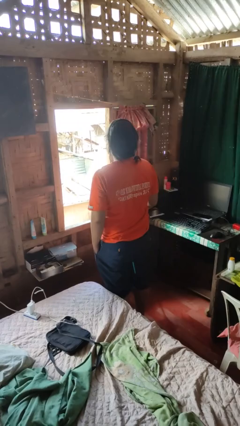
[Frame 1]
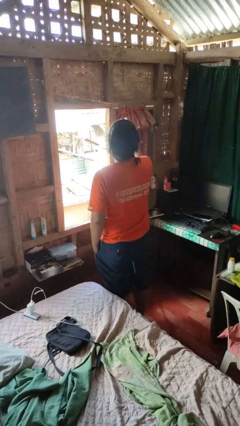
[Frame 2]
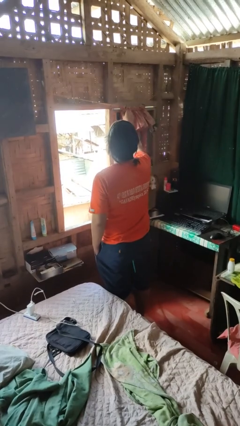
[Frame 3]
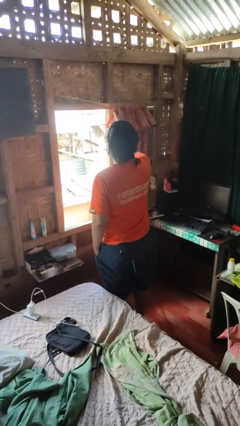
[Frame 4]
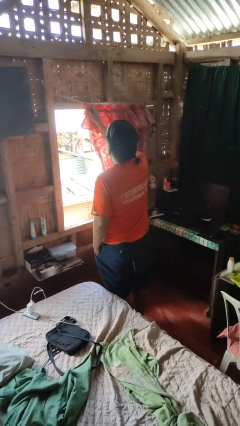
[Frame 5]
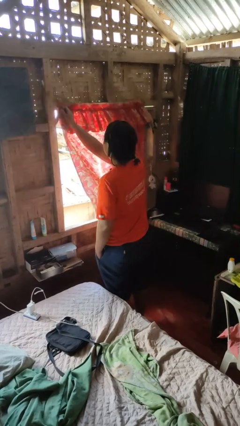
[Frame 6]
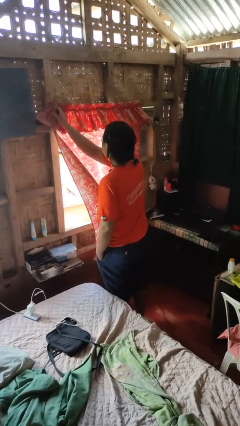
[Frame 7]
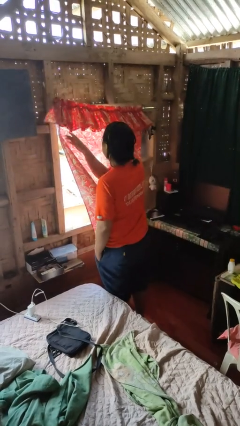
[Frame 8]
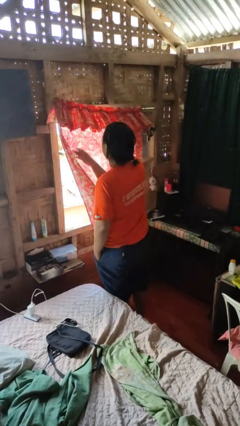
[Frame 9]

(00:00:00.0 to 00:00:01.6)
person closes curtains

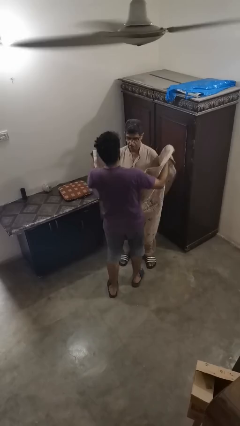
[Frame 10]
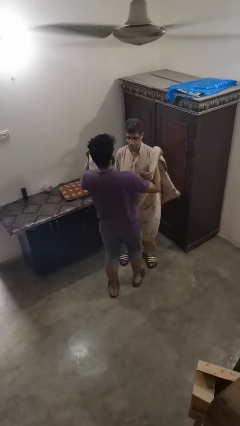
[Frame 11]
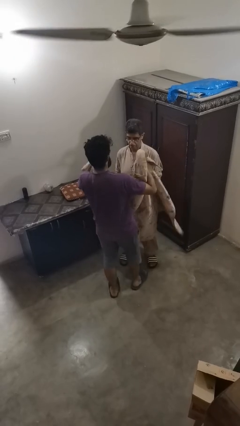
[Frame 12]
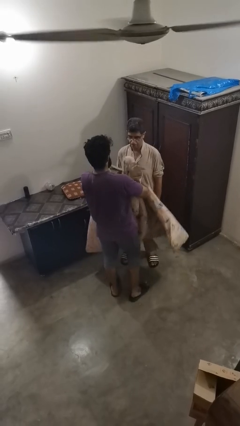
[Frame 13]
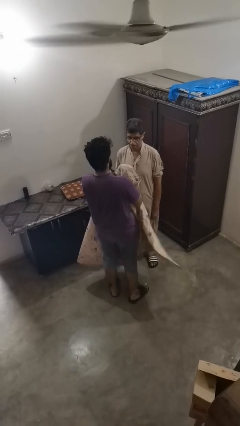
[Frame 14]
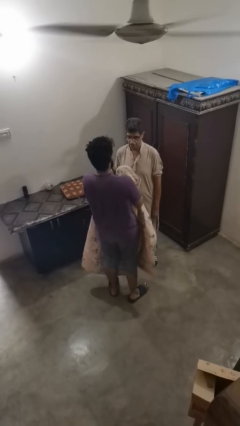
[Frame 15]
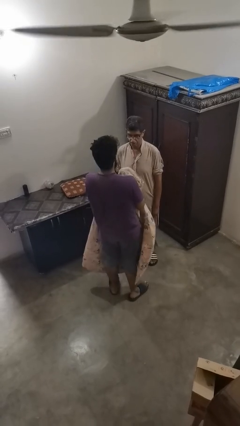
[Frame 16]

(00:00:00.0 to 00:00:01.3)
person uncovers friend with blanket

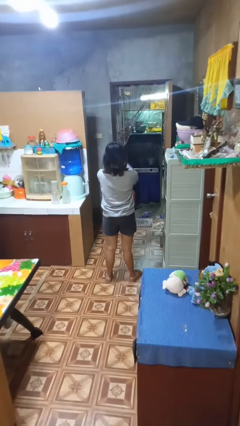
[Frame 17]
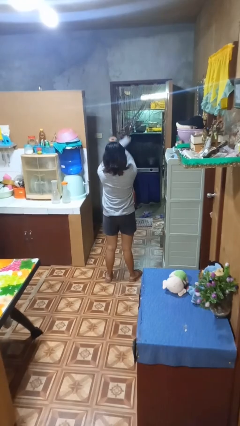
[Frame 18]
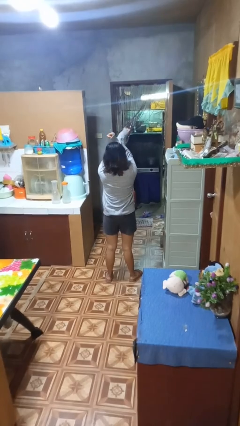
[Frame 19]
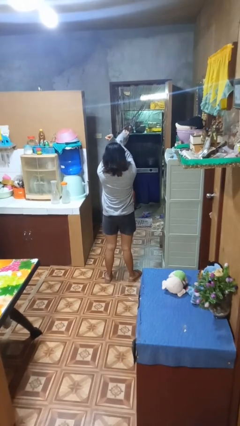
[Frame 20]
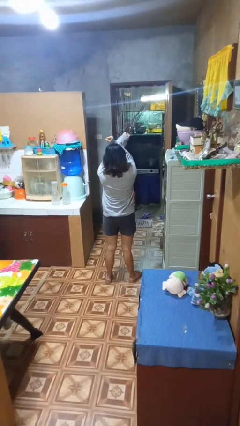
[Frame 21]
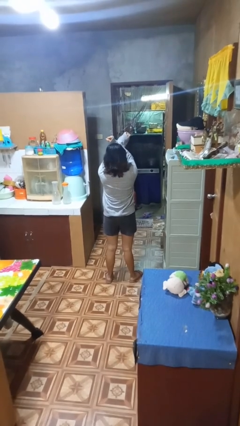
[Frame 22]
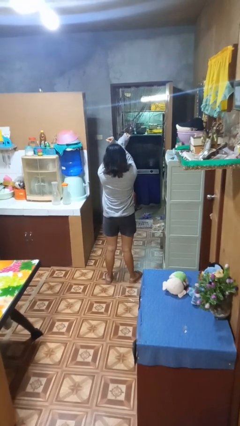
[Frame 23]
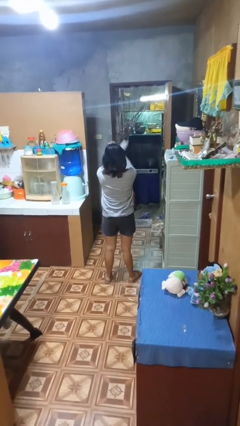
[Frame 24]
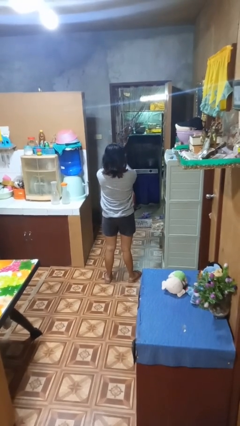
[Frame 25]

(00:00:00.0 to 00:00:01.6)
person gestures arms x

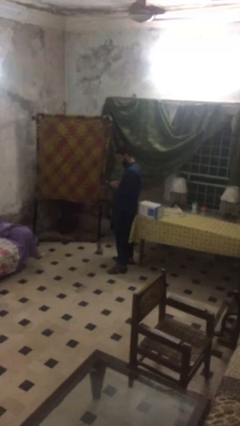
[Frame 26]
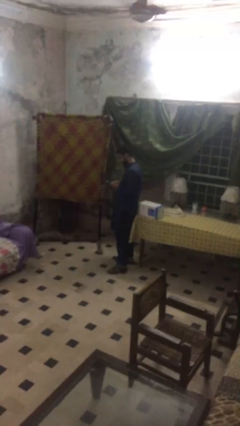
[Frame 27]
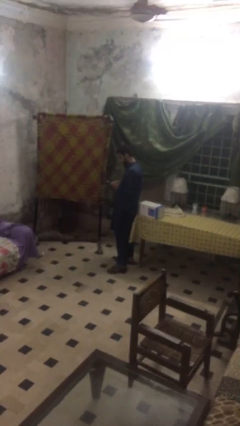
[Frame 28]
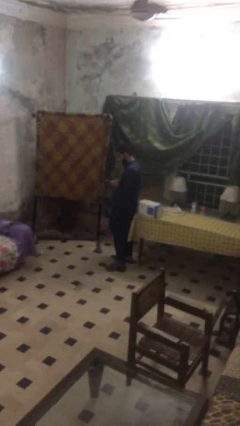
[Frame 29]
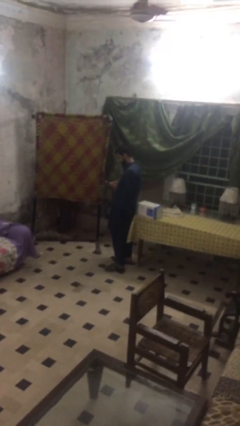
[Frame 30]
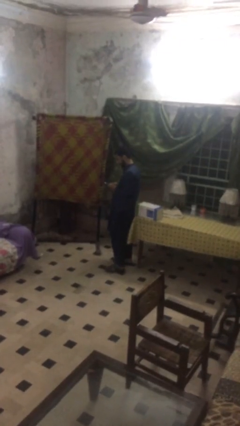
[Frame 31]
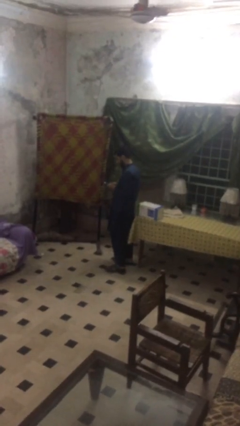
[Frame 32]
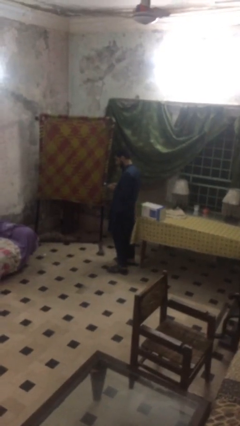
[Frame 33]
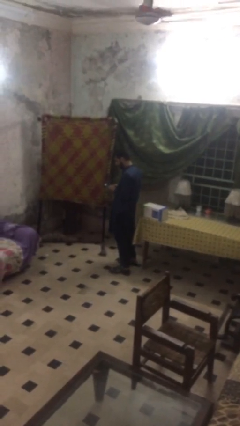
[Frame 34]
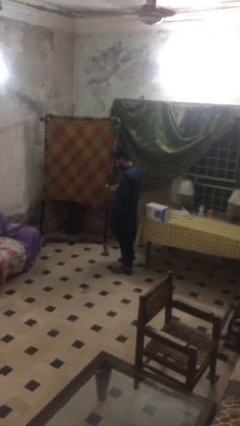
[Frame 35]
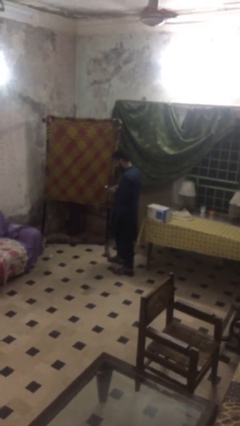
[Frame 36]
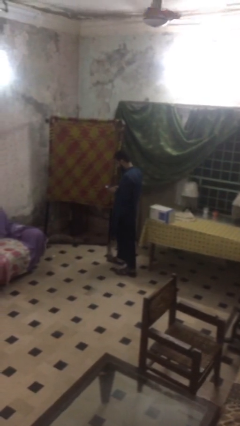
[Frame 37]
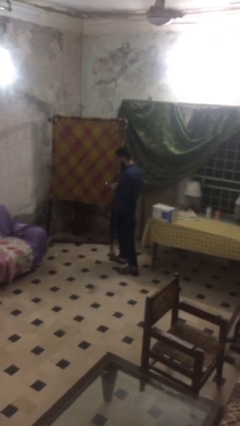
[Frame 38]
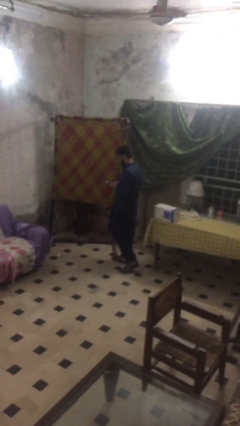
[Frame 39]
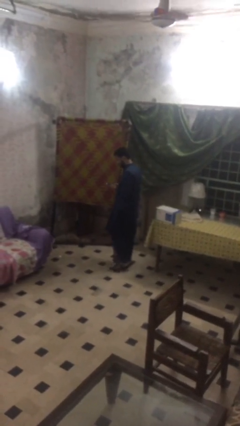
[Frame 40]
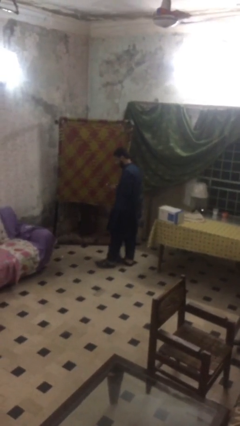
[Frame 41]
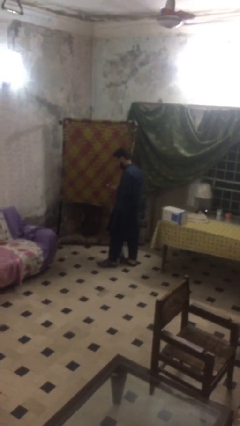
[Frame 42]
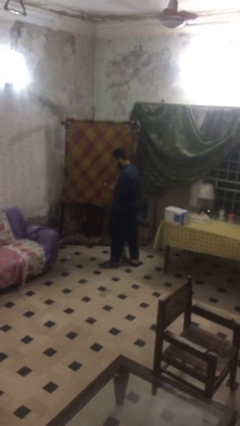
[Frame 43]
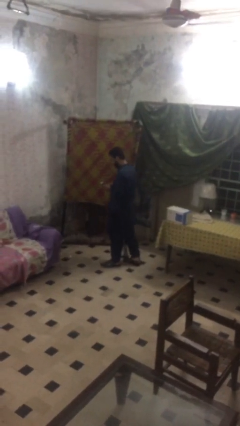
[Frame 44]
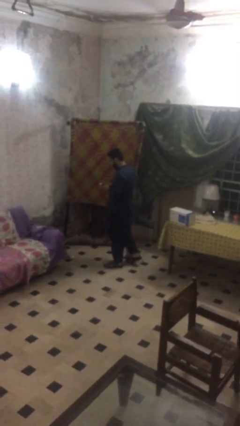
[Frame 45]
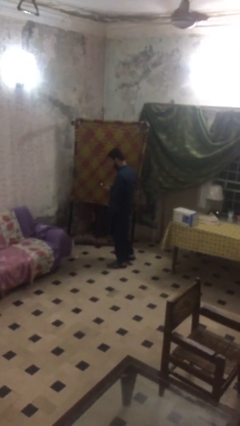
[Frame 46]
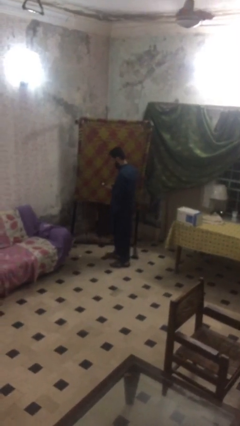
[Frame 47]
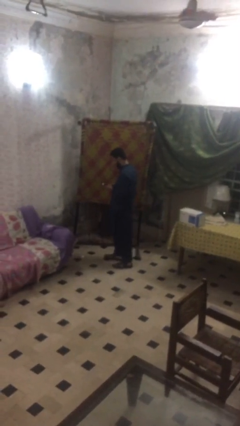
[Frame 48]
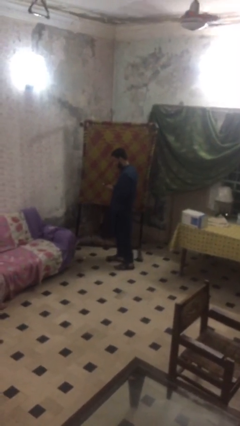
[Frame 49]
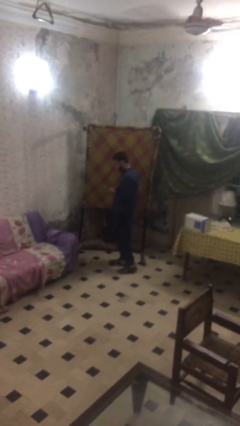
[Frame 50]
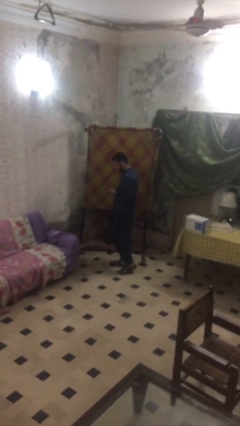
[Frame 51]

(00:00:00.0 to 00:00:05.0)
person texts on phone

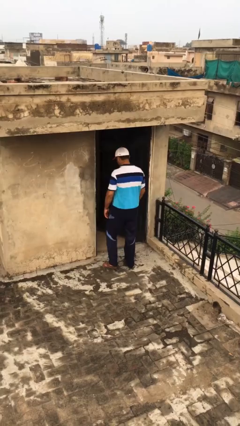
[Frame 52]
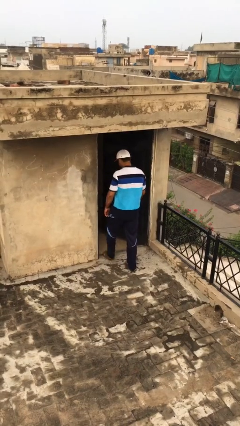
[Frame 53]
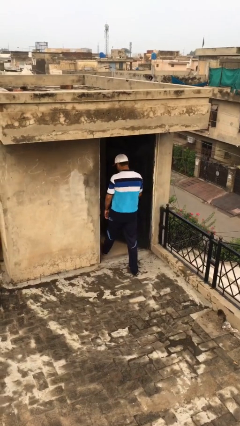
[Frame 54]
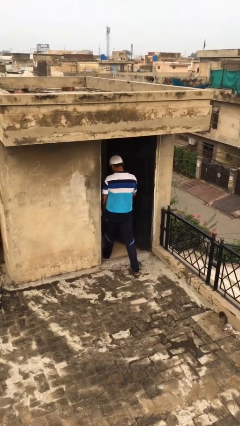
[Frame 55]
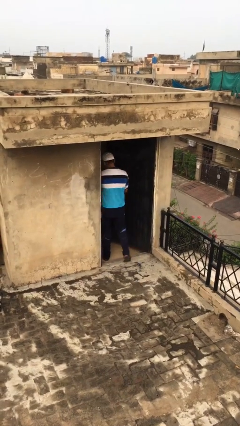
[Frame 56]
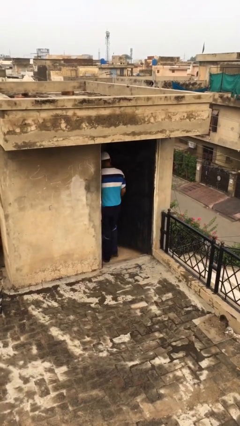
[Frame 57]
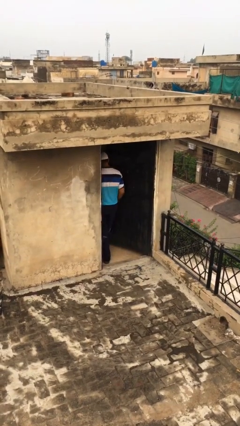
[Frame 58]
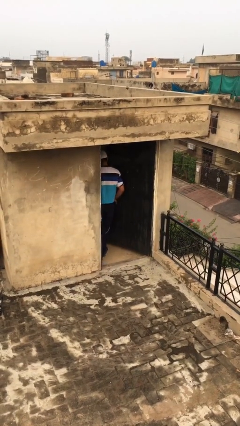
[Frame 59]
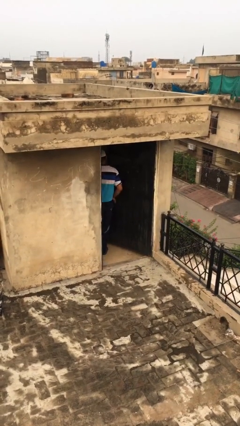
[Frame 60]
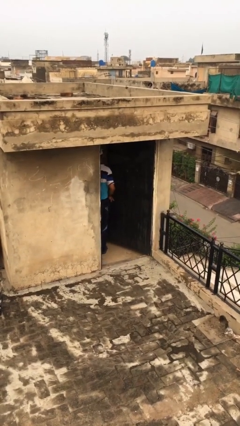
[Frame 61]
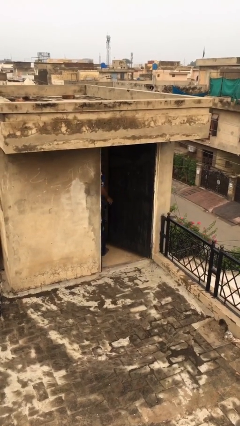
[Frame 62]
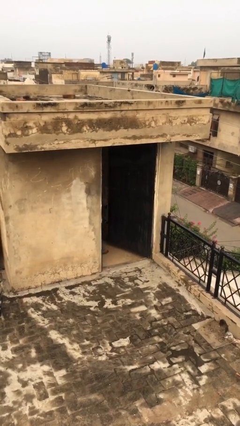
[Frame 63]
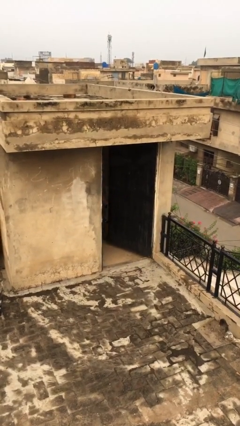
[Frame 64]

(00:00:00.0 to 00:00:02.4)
person exits scene through structure

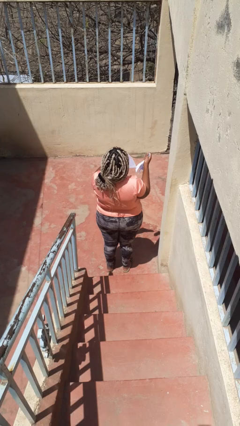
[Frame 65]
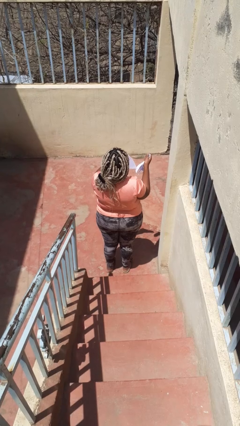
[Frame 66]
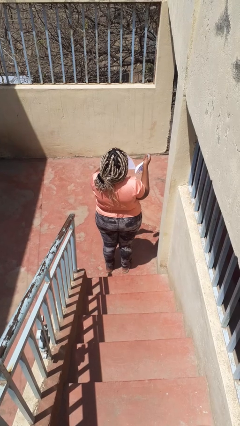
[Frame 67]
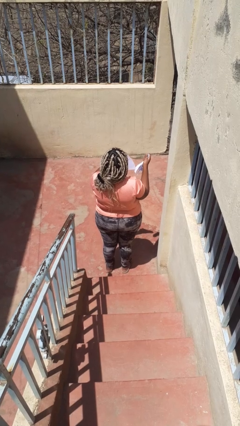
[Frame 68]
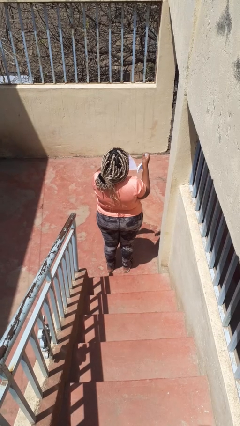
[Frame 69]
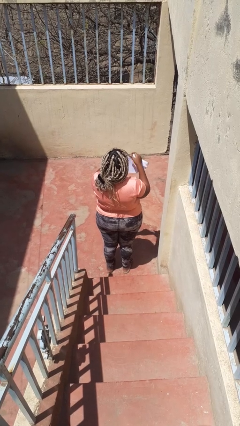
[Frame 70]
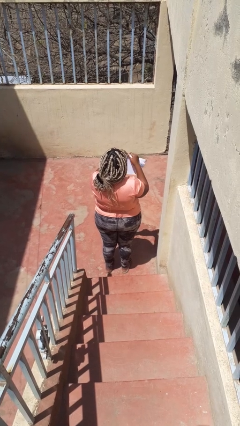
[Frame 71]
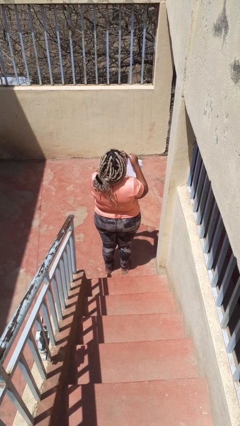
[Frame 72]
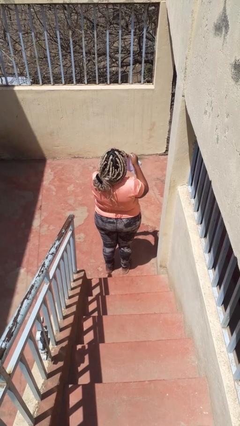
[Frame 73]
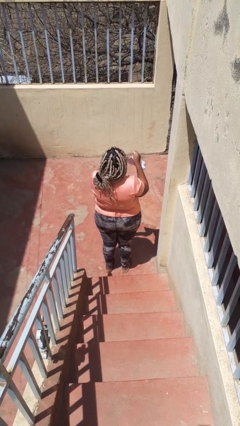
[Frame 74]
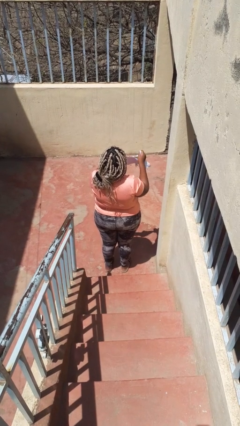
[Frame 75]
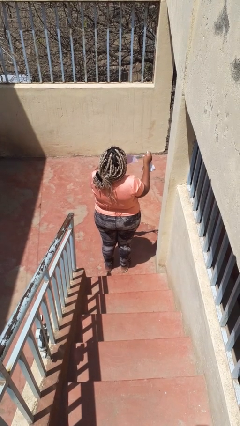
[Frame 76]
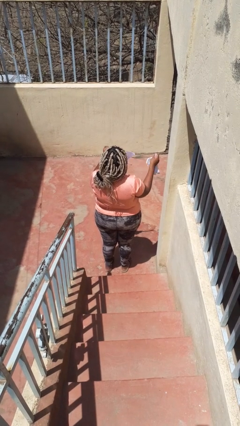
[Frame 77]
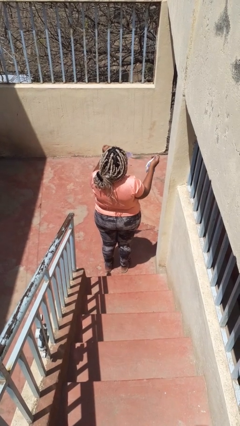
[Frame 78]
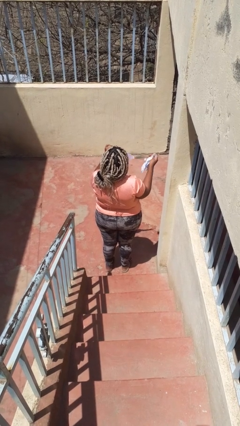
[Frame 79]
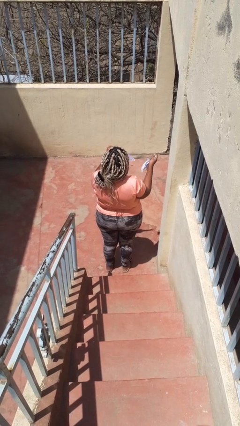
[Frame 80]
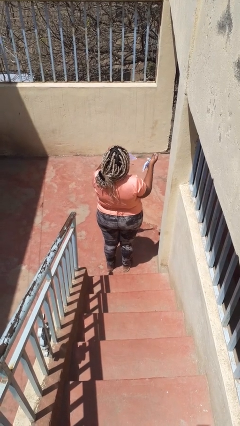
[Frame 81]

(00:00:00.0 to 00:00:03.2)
person tears paper

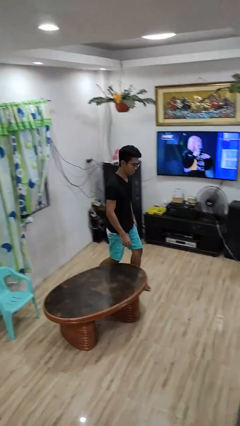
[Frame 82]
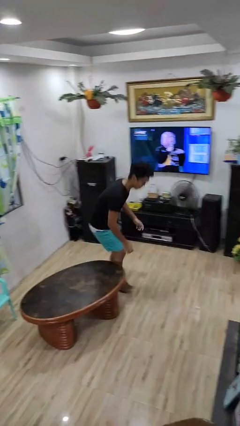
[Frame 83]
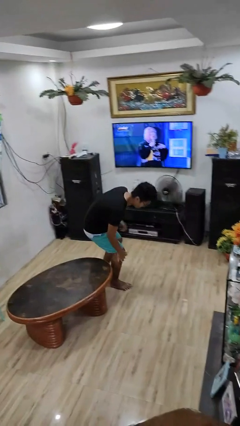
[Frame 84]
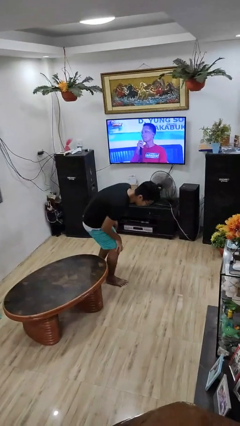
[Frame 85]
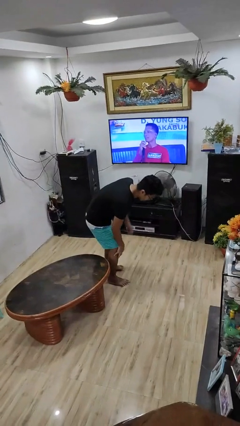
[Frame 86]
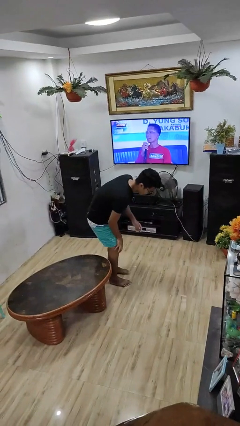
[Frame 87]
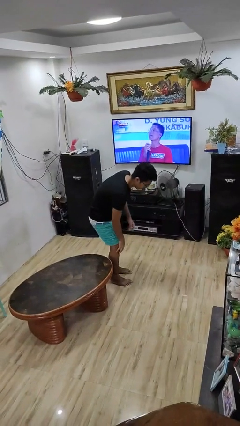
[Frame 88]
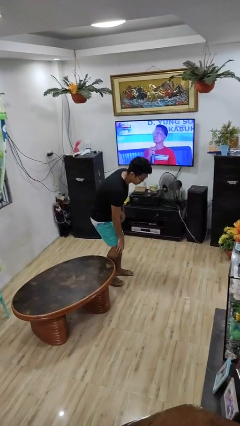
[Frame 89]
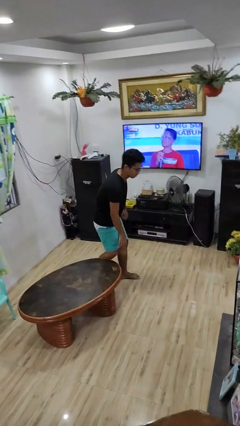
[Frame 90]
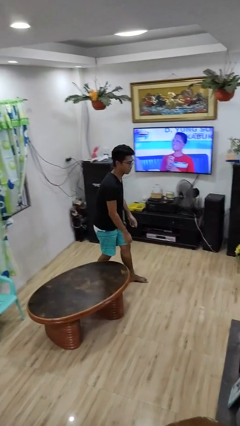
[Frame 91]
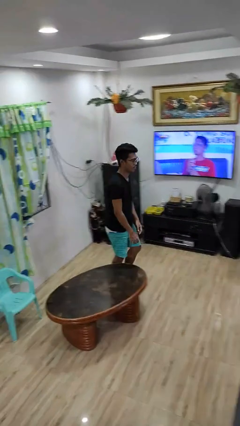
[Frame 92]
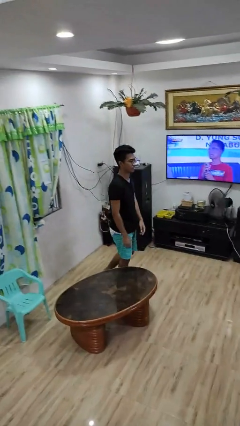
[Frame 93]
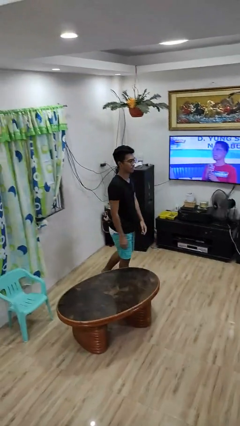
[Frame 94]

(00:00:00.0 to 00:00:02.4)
person bumps into table
